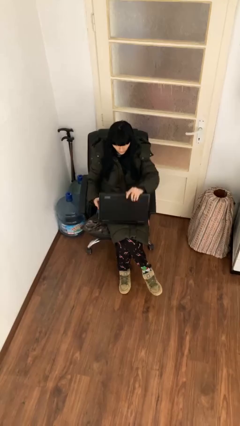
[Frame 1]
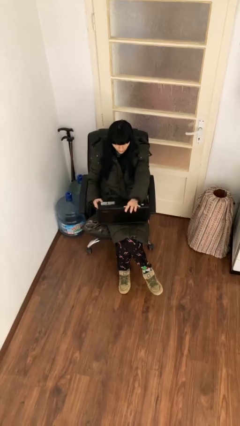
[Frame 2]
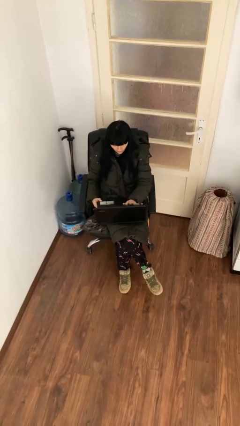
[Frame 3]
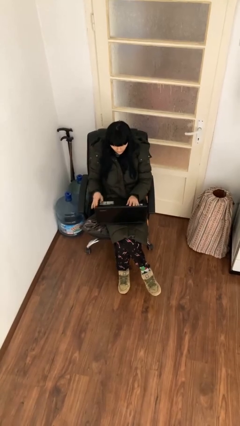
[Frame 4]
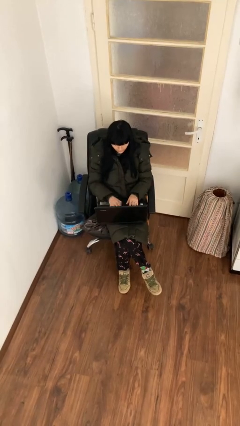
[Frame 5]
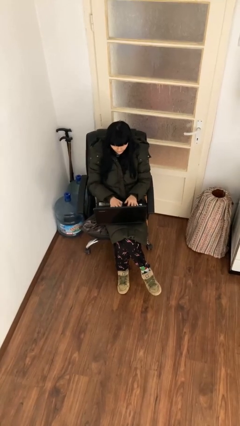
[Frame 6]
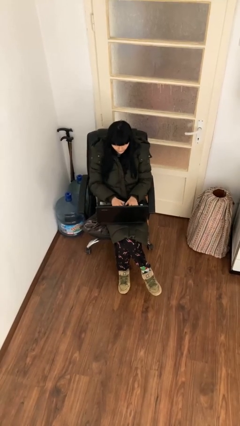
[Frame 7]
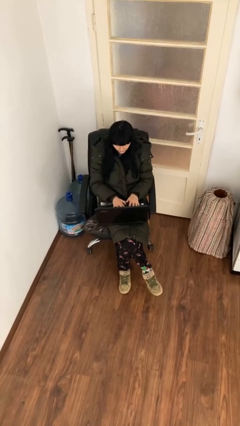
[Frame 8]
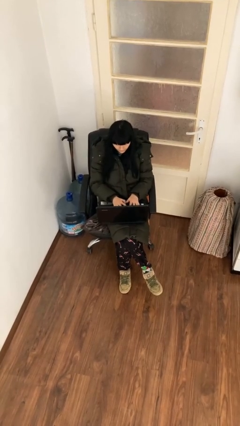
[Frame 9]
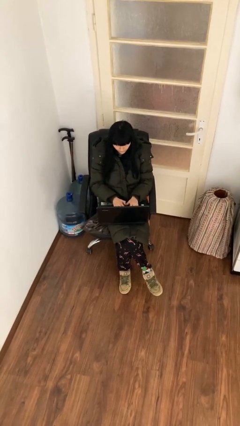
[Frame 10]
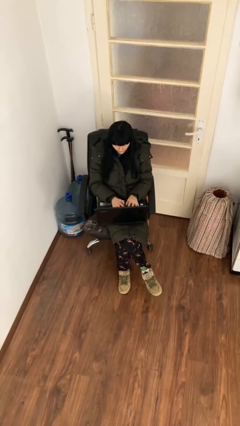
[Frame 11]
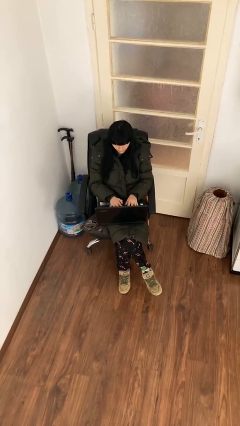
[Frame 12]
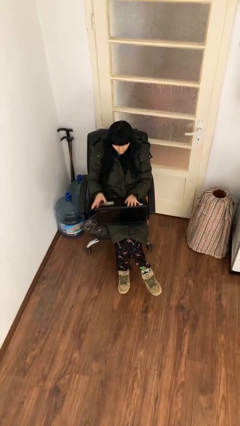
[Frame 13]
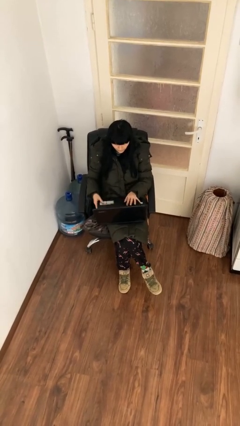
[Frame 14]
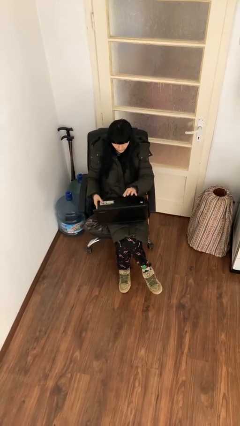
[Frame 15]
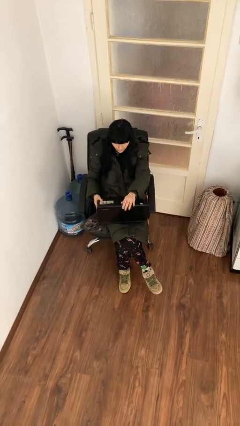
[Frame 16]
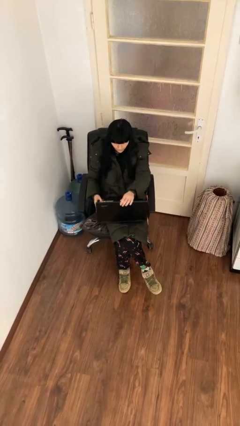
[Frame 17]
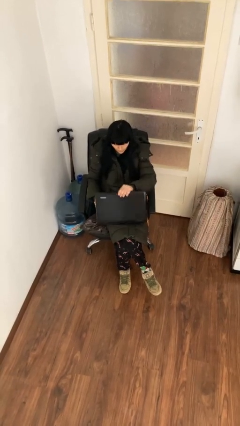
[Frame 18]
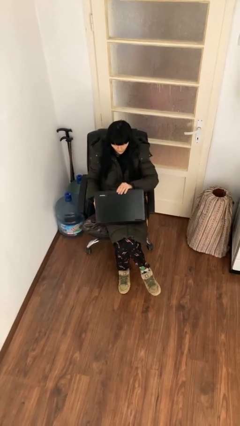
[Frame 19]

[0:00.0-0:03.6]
person interacts with laptop

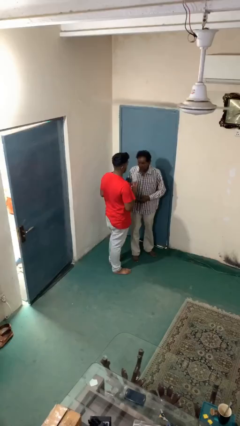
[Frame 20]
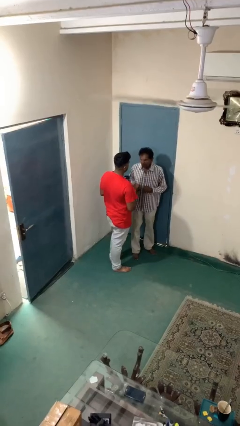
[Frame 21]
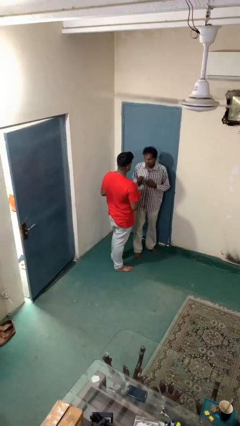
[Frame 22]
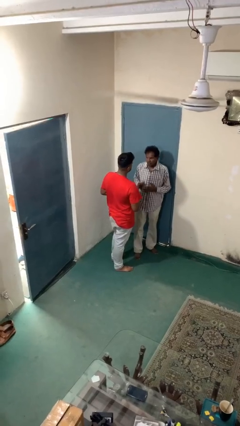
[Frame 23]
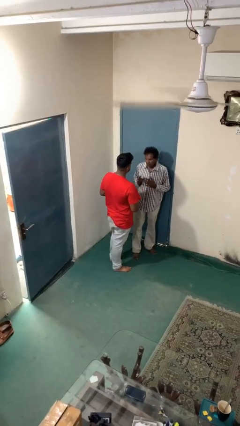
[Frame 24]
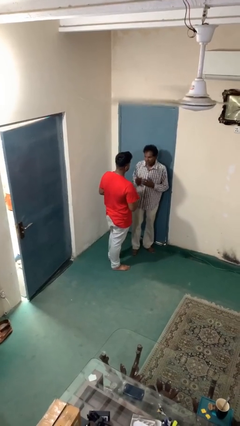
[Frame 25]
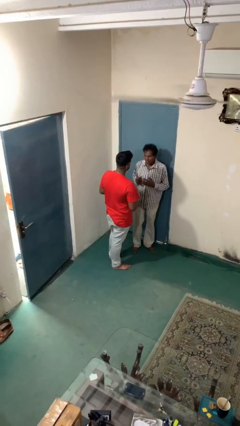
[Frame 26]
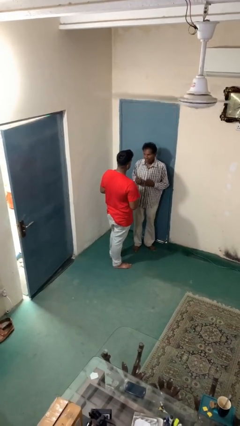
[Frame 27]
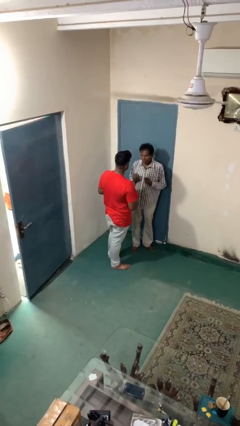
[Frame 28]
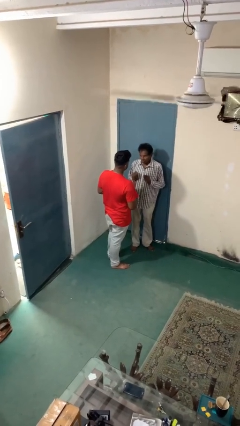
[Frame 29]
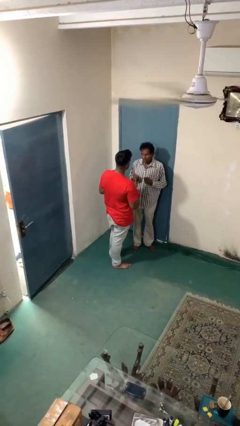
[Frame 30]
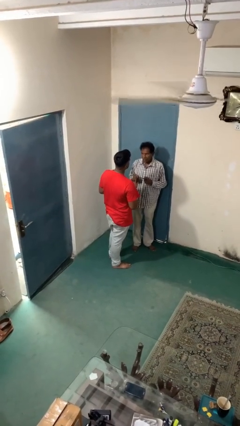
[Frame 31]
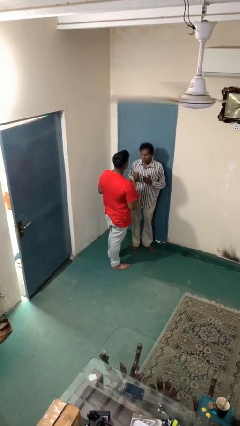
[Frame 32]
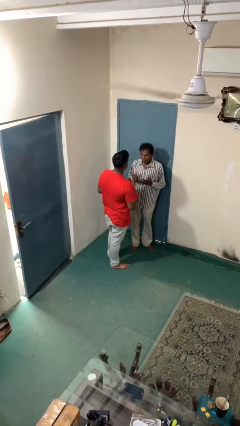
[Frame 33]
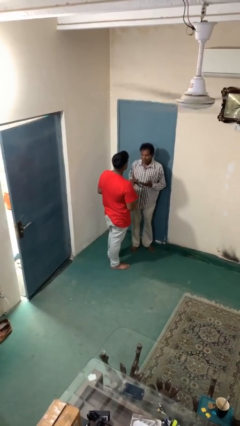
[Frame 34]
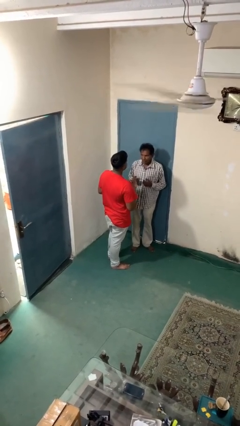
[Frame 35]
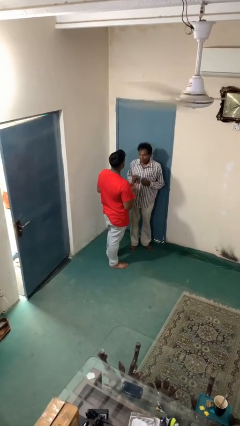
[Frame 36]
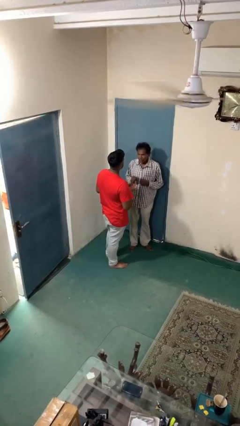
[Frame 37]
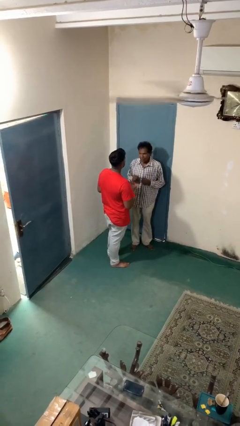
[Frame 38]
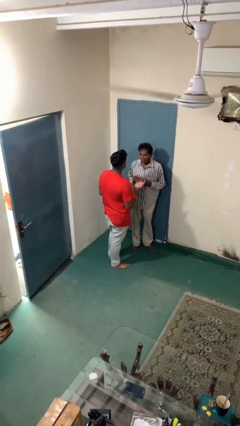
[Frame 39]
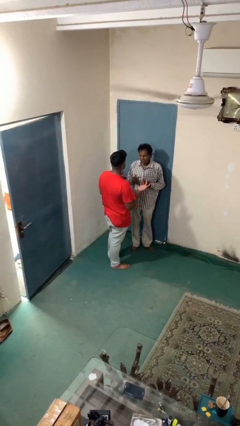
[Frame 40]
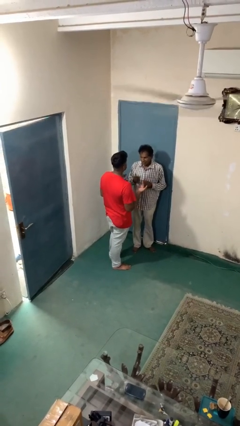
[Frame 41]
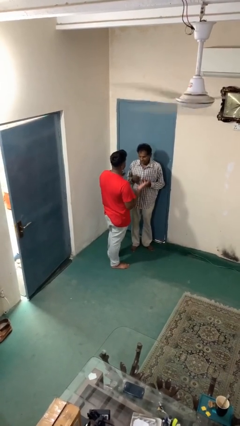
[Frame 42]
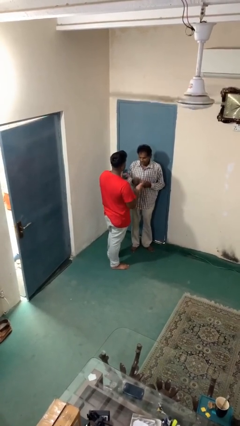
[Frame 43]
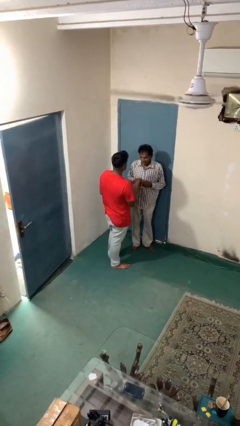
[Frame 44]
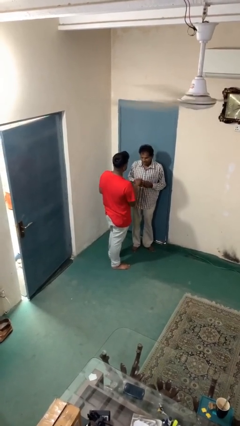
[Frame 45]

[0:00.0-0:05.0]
person talks to person

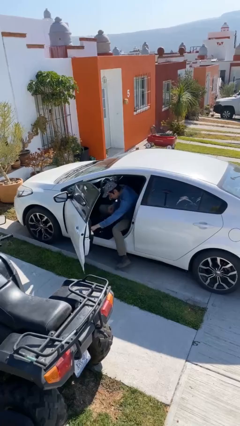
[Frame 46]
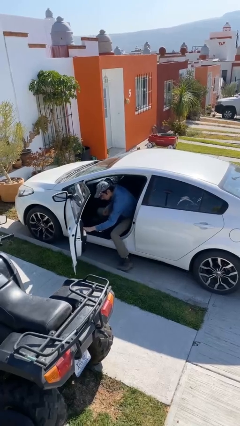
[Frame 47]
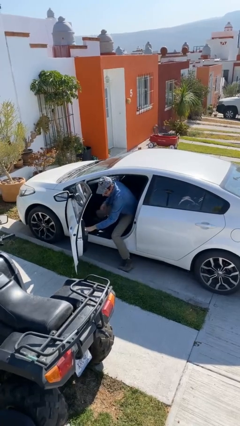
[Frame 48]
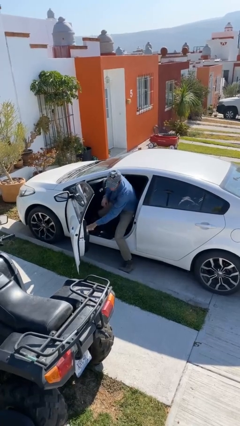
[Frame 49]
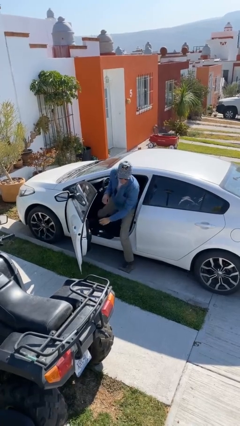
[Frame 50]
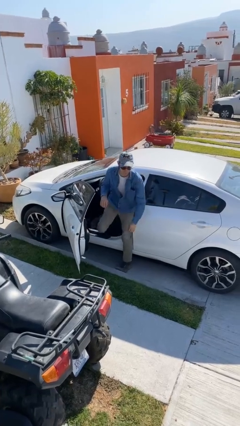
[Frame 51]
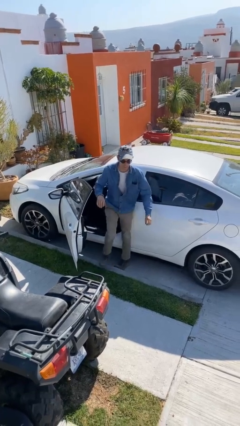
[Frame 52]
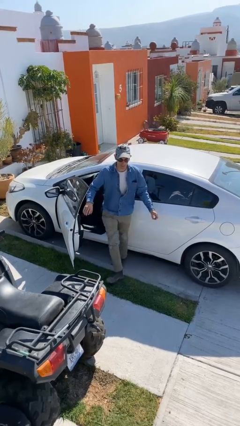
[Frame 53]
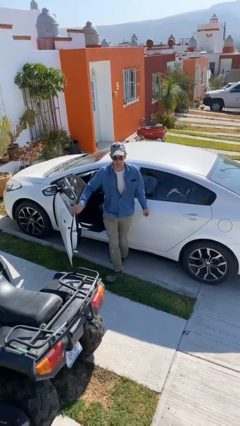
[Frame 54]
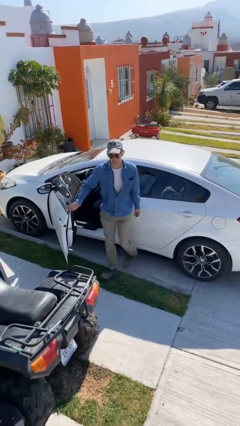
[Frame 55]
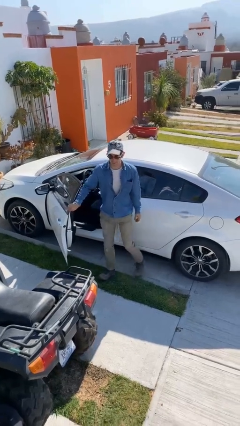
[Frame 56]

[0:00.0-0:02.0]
person exits car

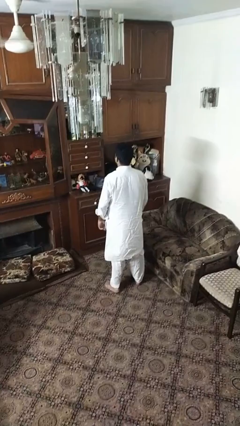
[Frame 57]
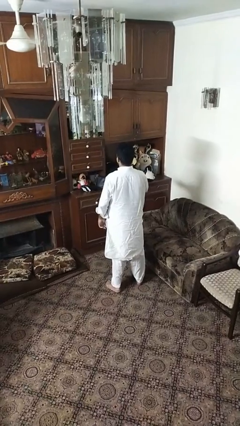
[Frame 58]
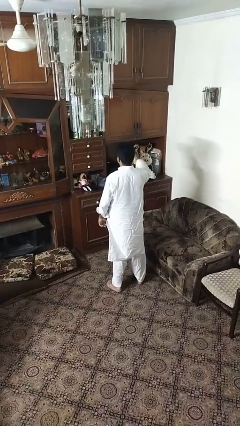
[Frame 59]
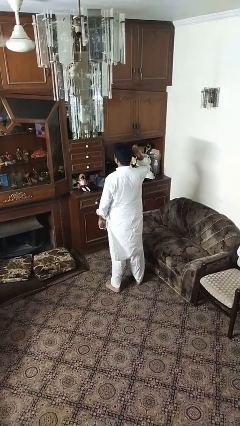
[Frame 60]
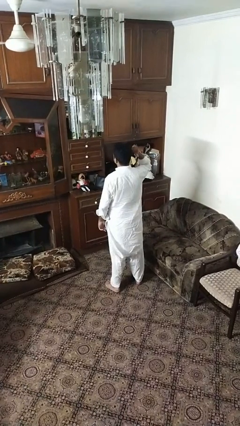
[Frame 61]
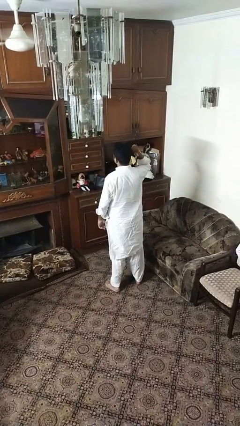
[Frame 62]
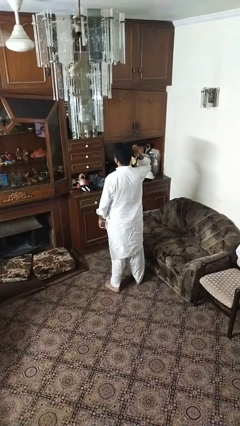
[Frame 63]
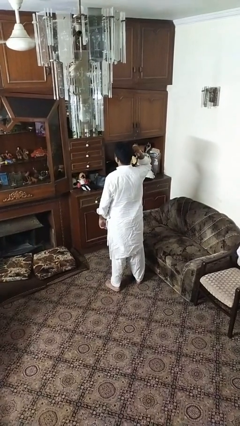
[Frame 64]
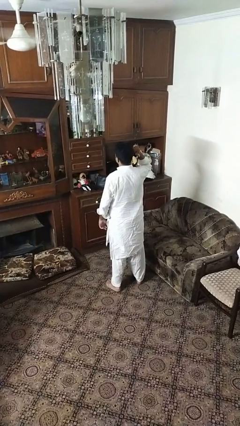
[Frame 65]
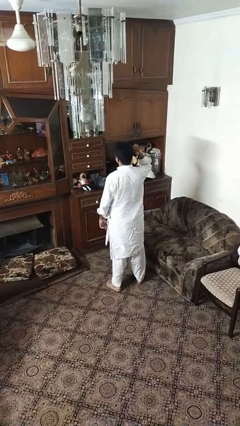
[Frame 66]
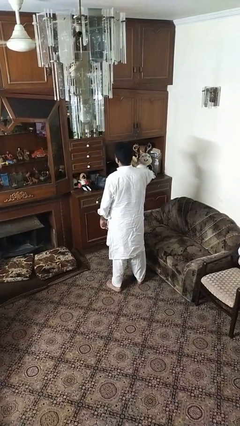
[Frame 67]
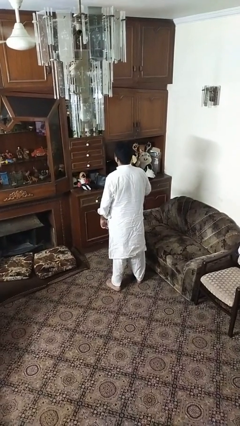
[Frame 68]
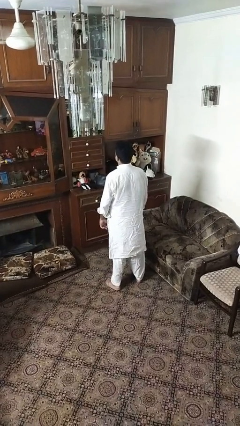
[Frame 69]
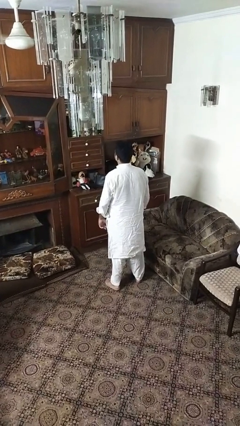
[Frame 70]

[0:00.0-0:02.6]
person gestures behind me

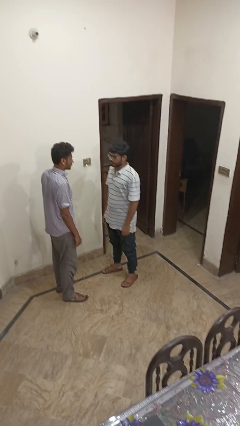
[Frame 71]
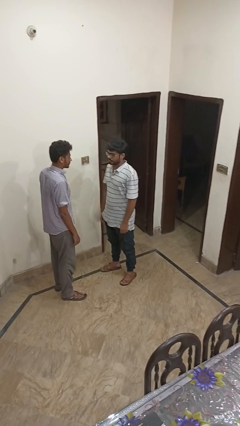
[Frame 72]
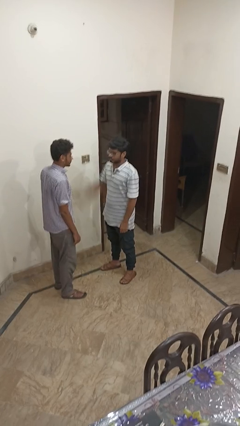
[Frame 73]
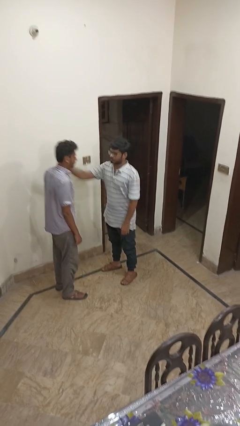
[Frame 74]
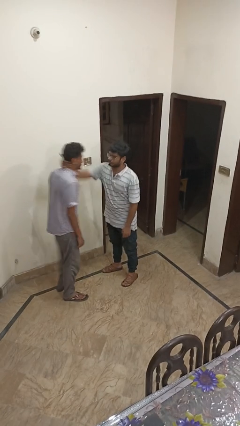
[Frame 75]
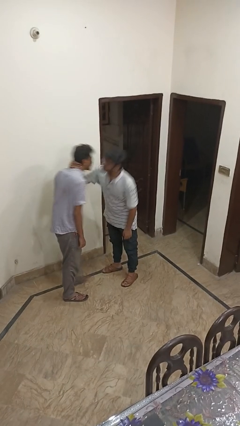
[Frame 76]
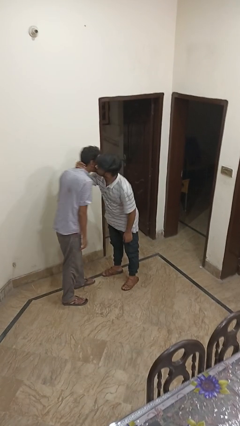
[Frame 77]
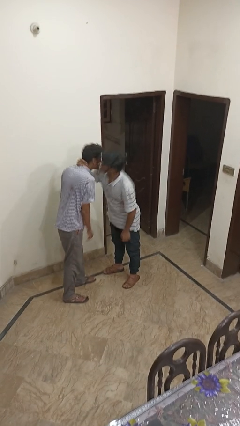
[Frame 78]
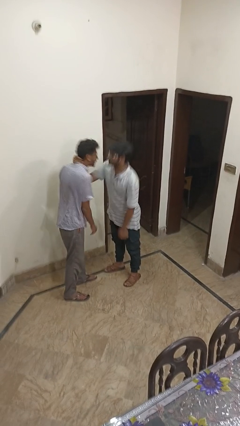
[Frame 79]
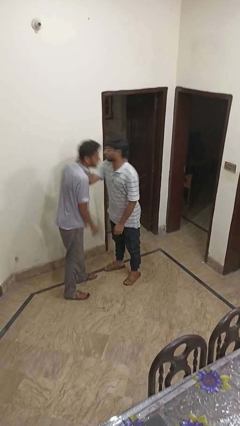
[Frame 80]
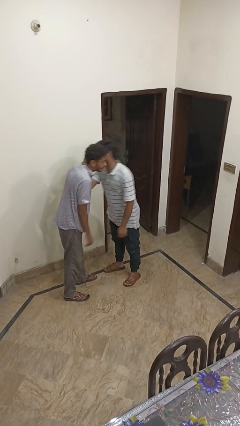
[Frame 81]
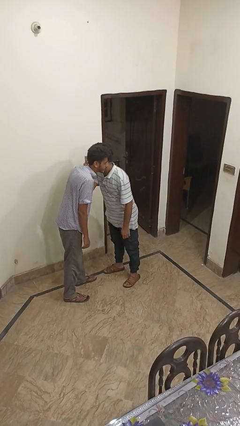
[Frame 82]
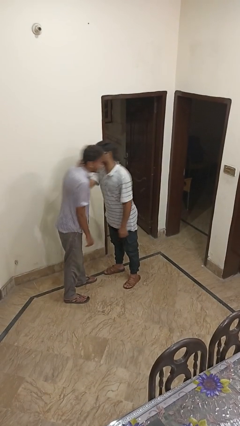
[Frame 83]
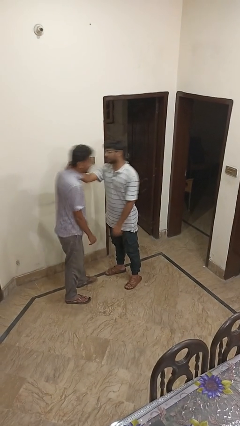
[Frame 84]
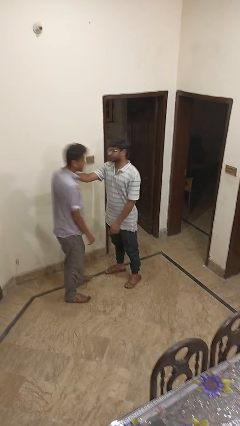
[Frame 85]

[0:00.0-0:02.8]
person kisses cheek of person

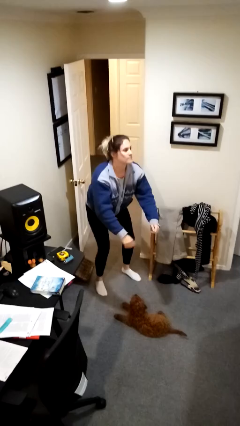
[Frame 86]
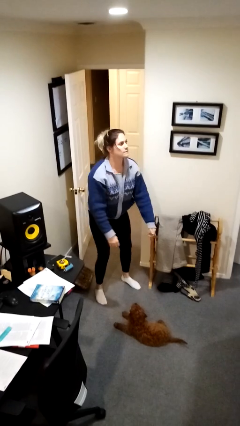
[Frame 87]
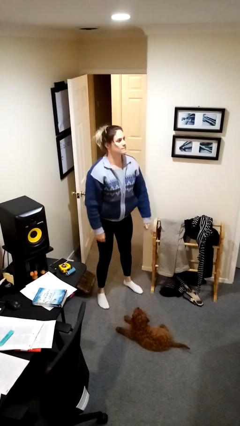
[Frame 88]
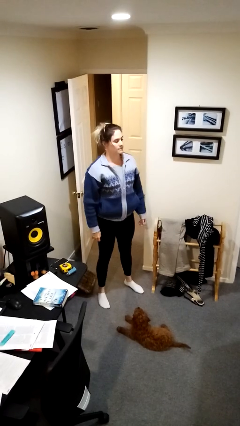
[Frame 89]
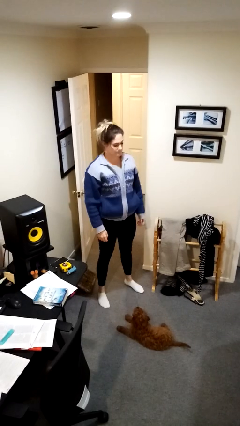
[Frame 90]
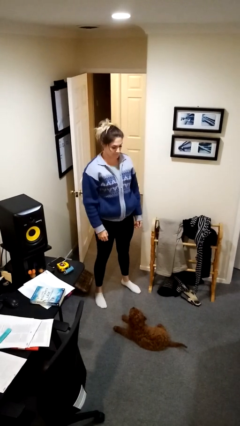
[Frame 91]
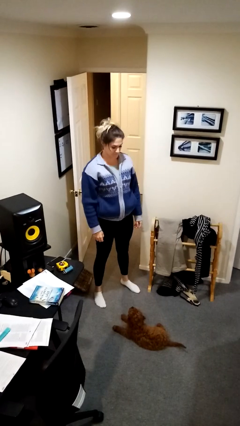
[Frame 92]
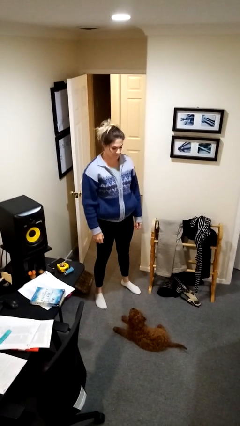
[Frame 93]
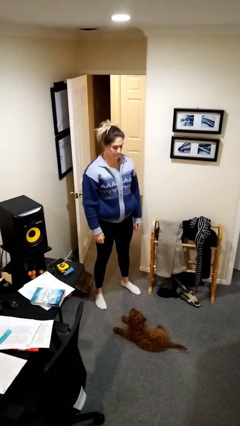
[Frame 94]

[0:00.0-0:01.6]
person stands up
